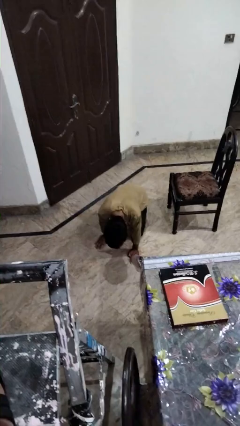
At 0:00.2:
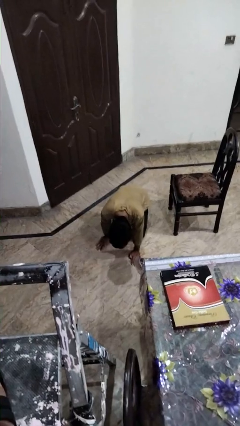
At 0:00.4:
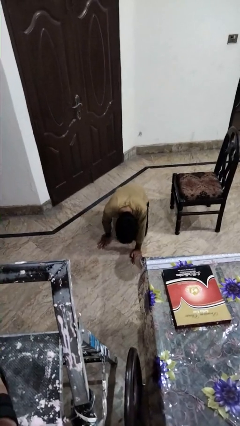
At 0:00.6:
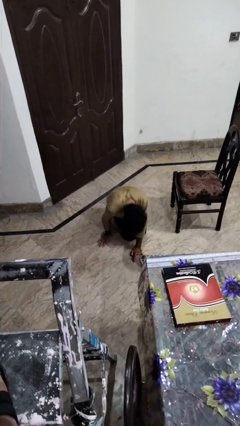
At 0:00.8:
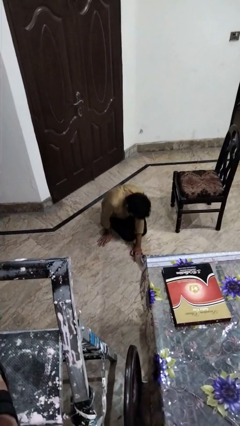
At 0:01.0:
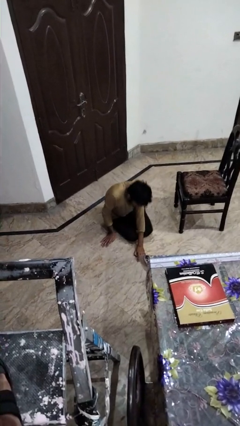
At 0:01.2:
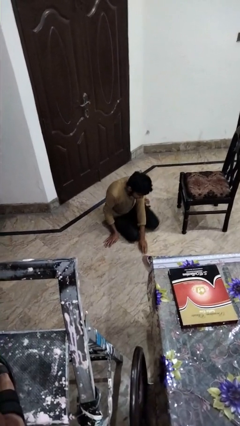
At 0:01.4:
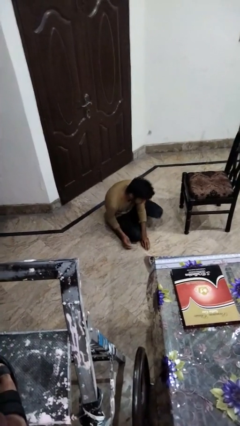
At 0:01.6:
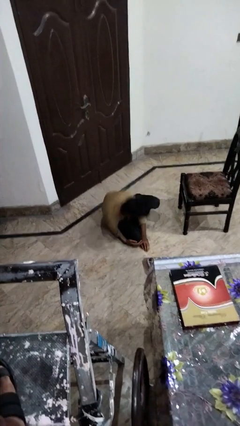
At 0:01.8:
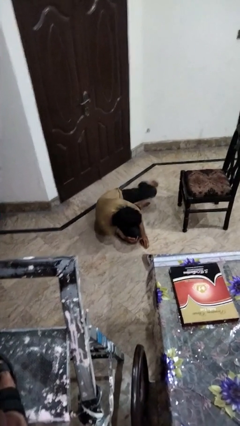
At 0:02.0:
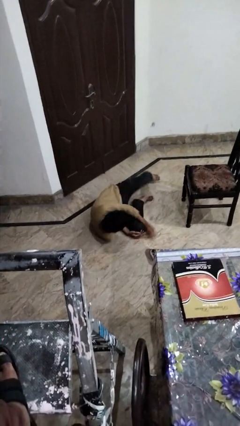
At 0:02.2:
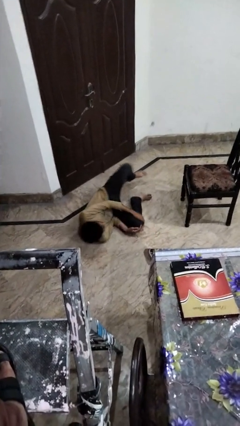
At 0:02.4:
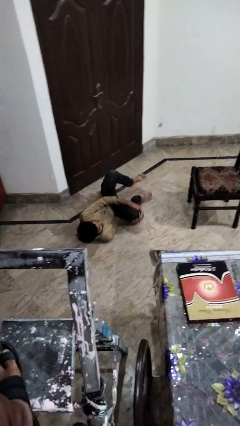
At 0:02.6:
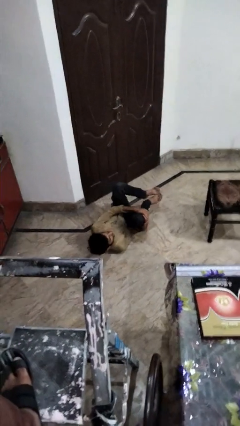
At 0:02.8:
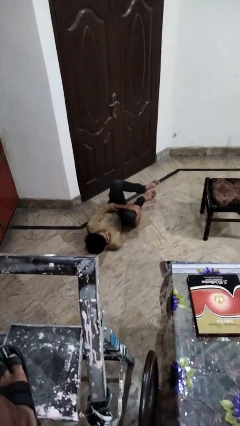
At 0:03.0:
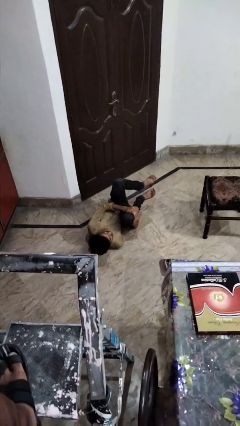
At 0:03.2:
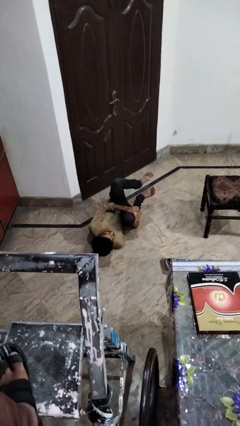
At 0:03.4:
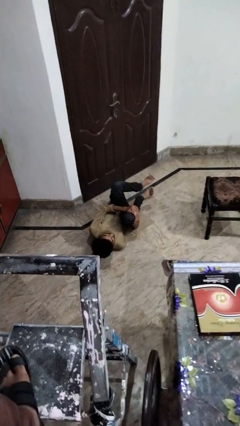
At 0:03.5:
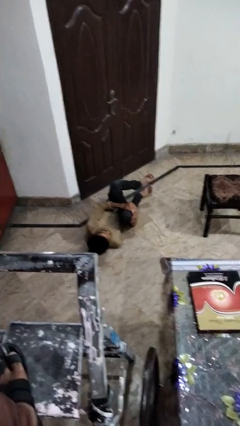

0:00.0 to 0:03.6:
person lies down on floor

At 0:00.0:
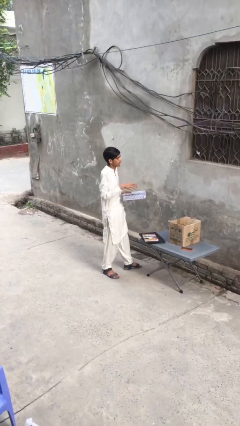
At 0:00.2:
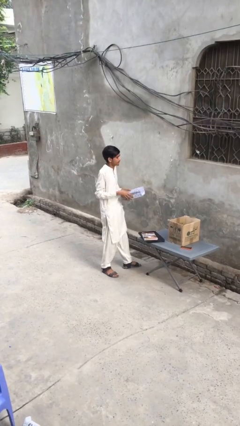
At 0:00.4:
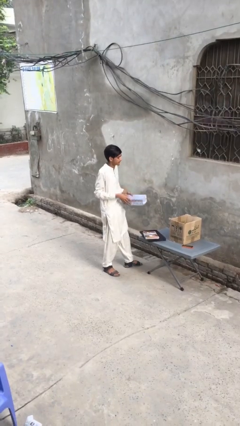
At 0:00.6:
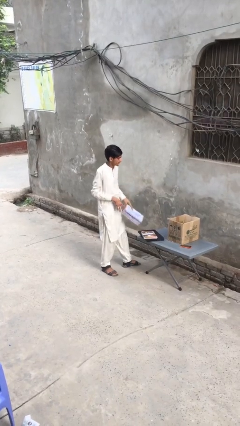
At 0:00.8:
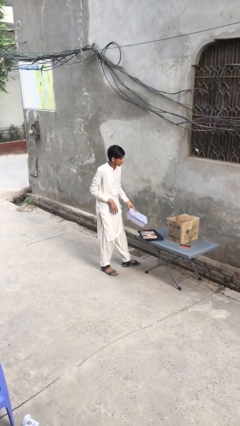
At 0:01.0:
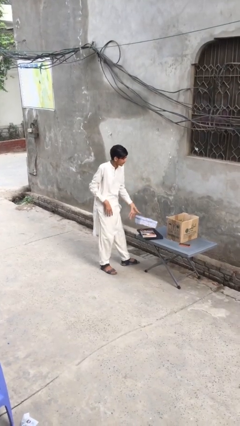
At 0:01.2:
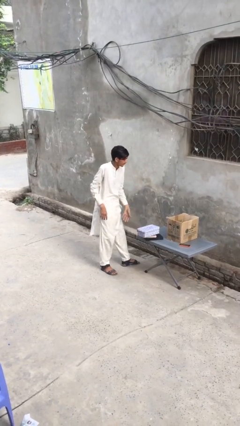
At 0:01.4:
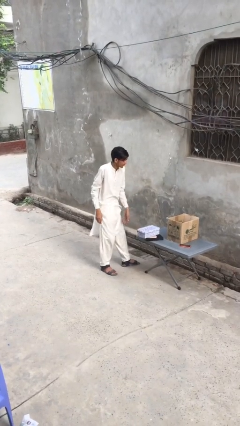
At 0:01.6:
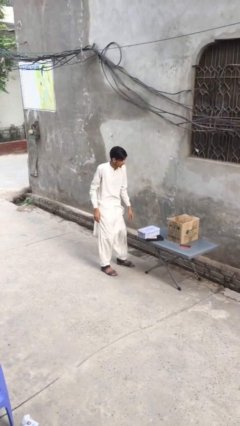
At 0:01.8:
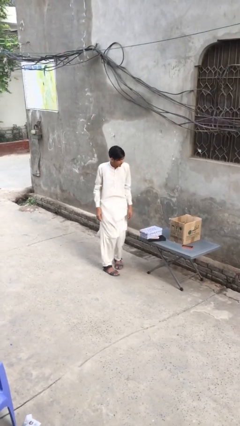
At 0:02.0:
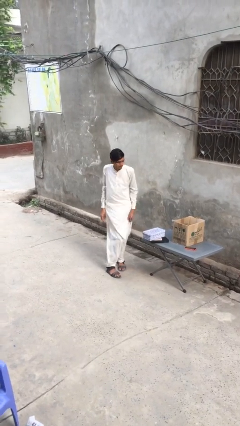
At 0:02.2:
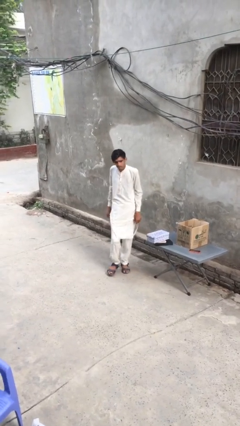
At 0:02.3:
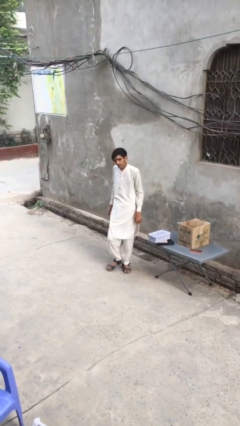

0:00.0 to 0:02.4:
person puts down object on table

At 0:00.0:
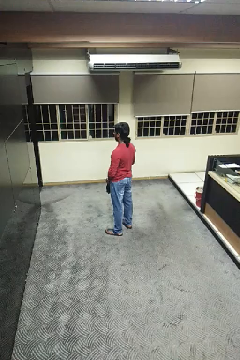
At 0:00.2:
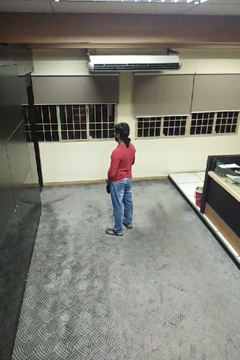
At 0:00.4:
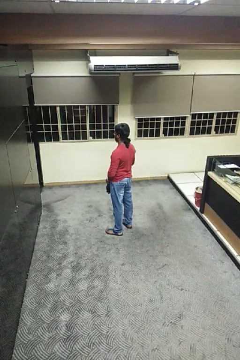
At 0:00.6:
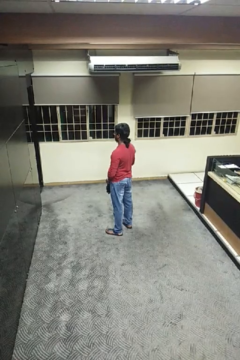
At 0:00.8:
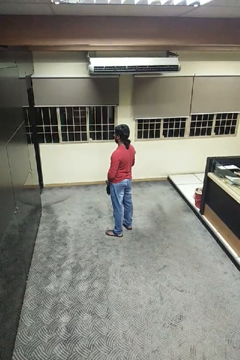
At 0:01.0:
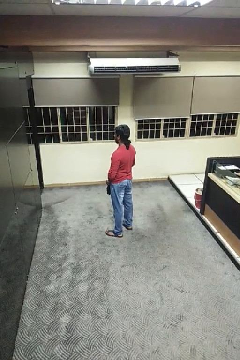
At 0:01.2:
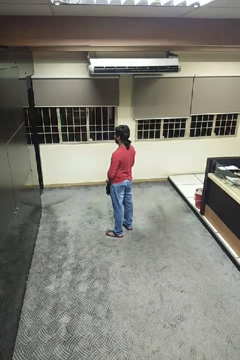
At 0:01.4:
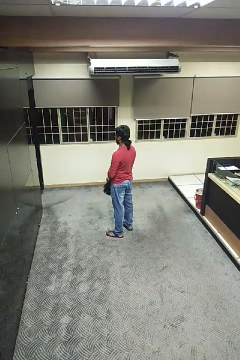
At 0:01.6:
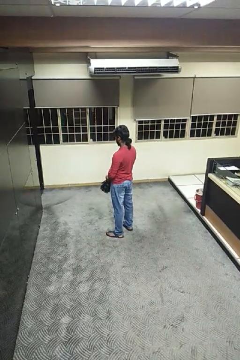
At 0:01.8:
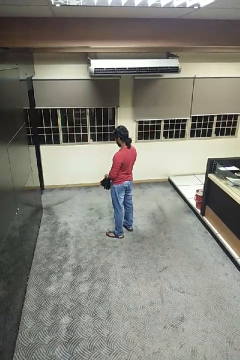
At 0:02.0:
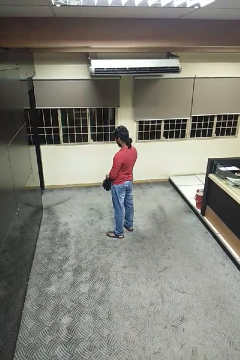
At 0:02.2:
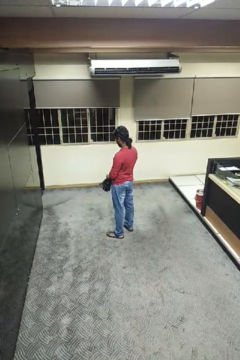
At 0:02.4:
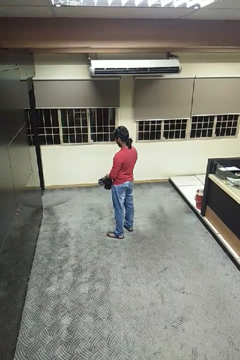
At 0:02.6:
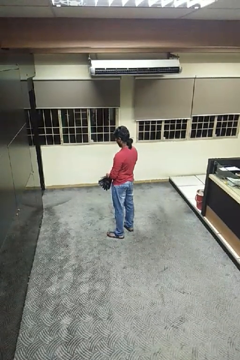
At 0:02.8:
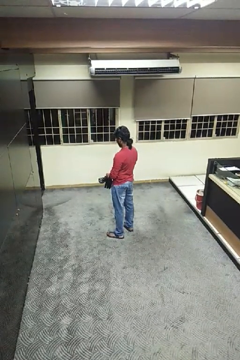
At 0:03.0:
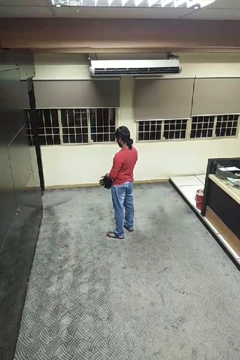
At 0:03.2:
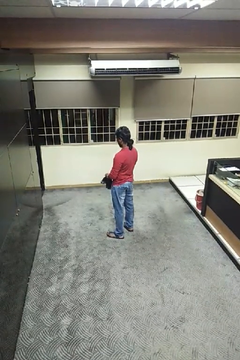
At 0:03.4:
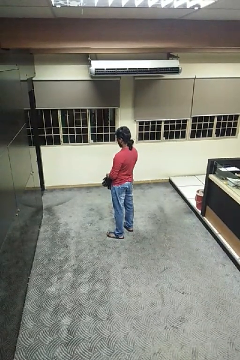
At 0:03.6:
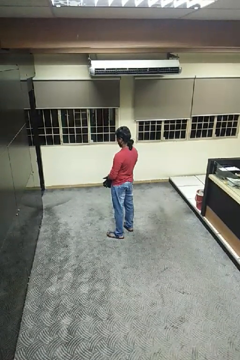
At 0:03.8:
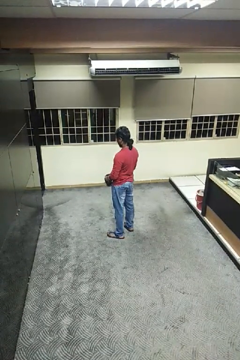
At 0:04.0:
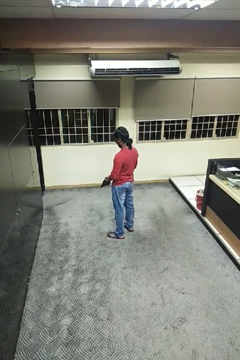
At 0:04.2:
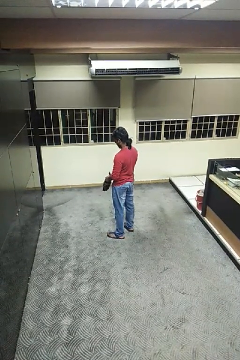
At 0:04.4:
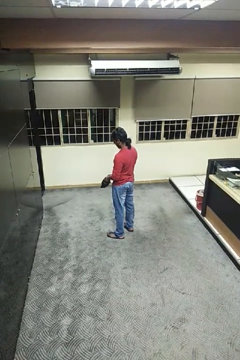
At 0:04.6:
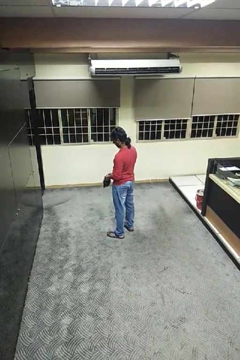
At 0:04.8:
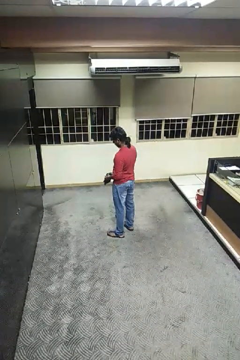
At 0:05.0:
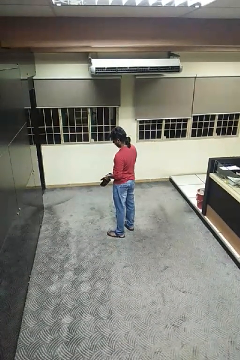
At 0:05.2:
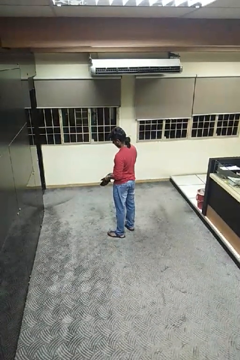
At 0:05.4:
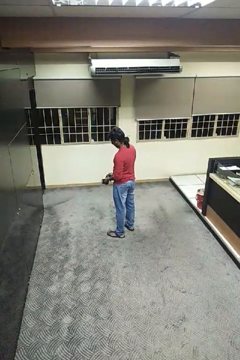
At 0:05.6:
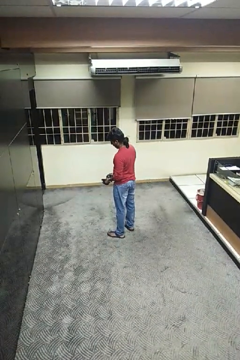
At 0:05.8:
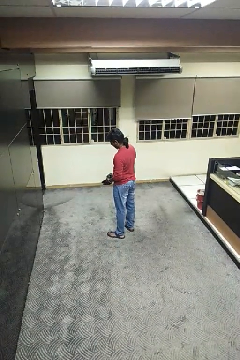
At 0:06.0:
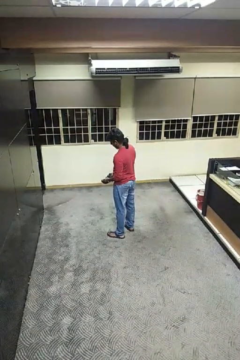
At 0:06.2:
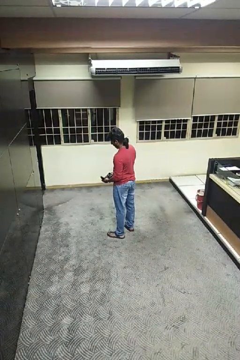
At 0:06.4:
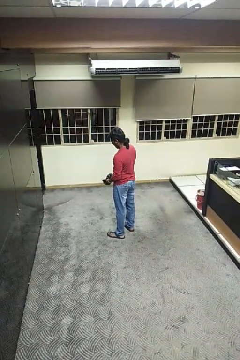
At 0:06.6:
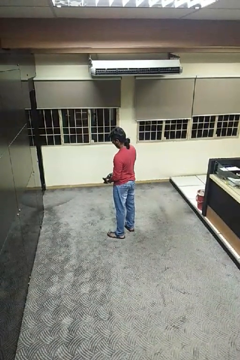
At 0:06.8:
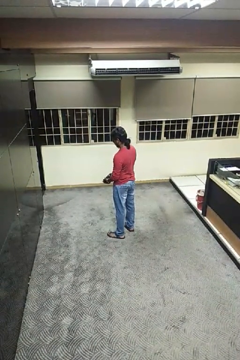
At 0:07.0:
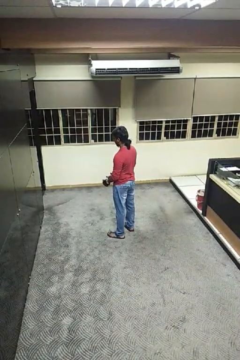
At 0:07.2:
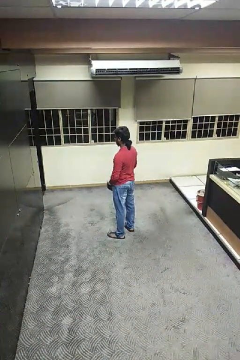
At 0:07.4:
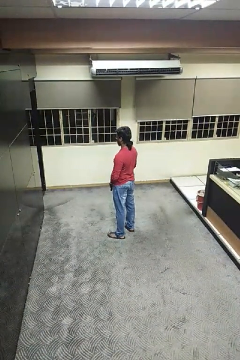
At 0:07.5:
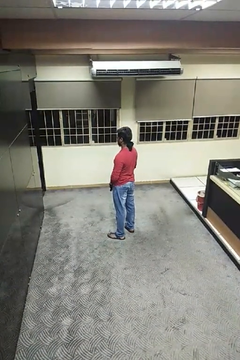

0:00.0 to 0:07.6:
person puts on gloves

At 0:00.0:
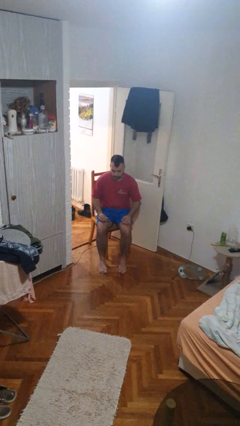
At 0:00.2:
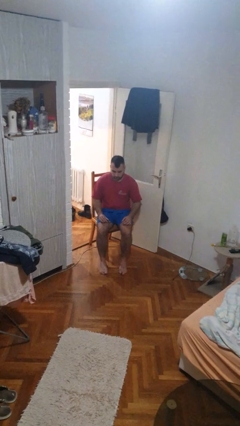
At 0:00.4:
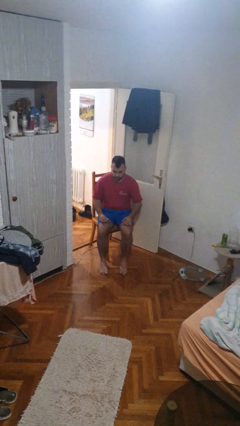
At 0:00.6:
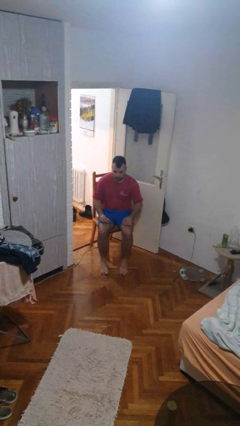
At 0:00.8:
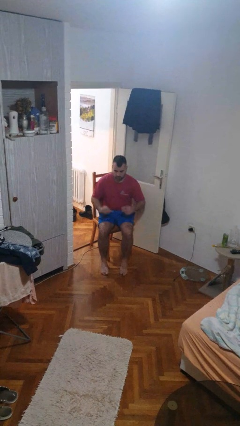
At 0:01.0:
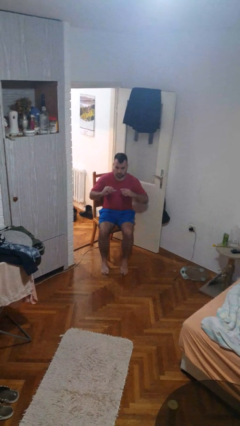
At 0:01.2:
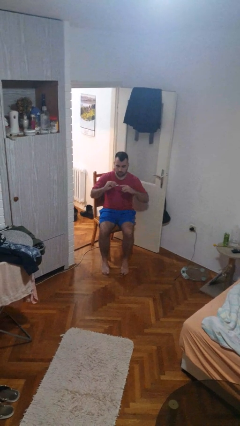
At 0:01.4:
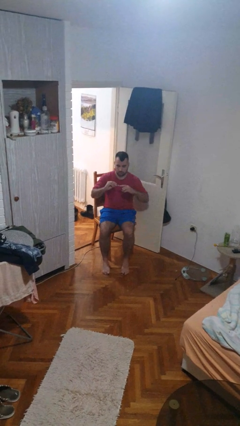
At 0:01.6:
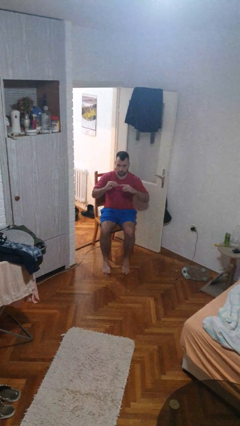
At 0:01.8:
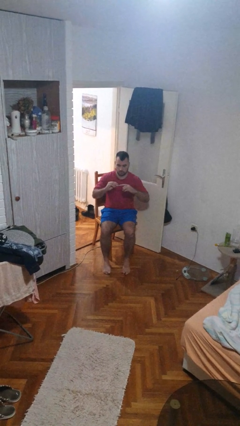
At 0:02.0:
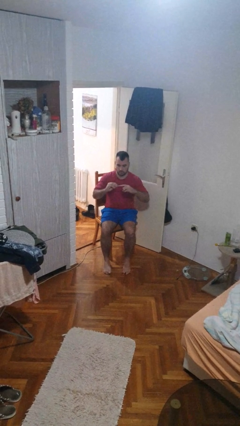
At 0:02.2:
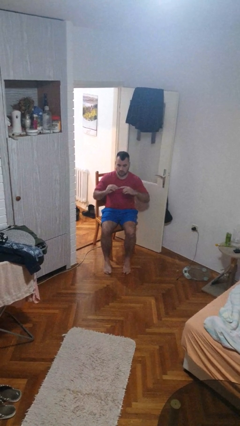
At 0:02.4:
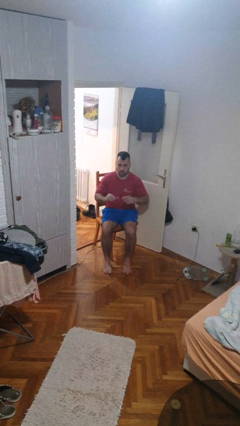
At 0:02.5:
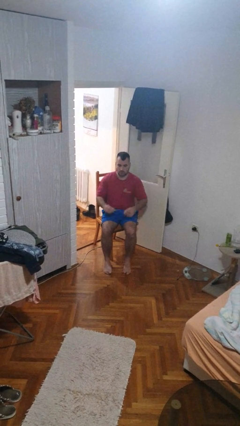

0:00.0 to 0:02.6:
person clips fingernails

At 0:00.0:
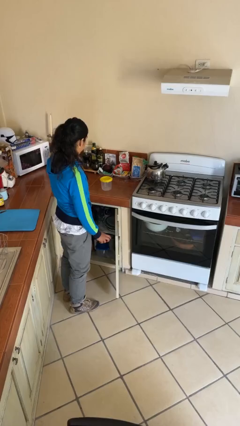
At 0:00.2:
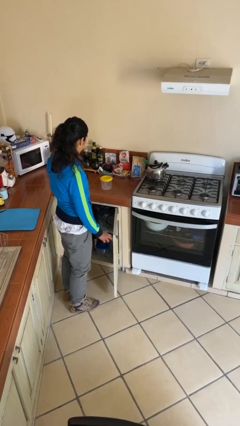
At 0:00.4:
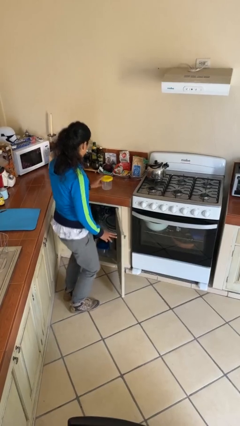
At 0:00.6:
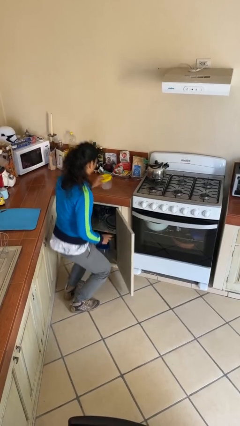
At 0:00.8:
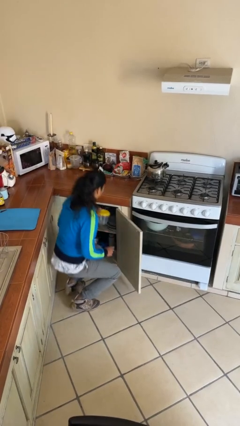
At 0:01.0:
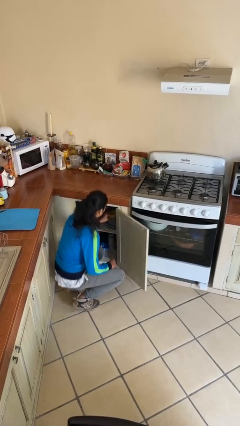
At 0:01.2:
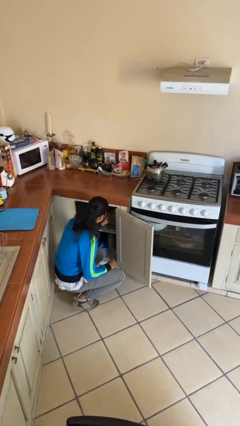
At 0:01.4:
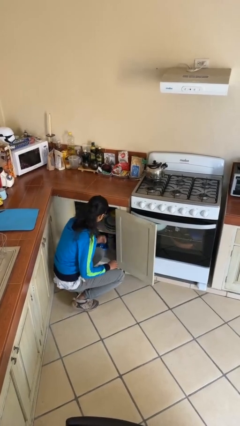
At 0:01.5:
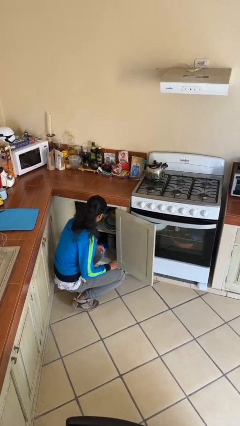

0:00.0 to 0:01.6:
person puts object in cabinet

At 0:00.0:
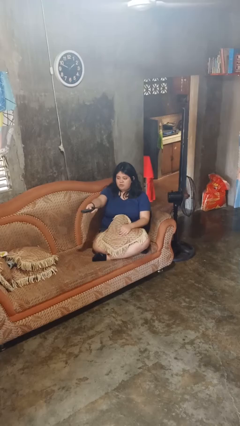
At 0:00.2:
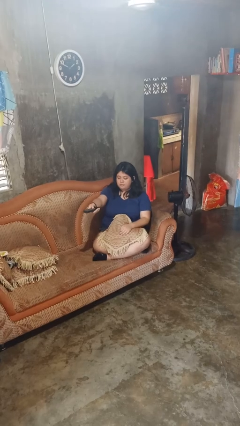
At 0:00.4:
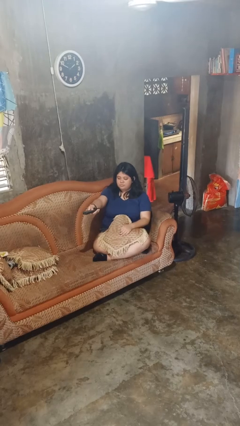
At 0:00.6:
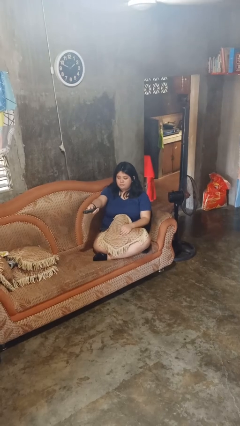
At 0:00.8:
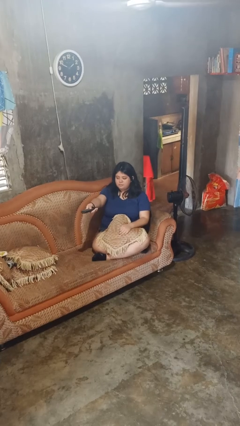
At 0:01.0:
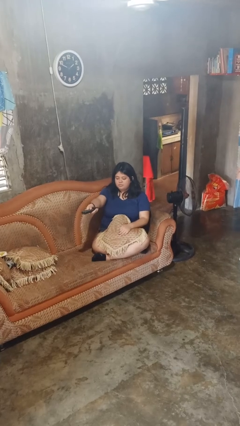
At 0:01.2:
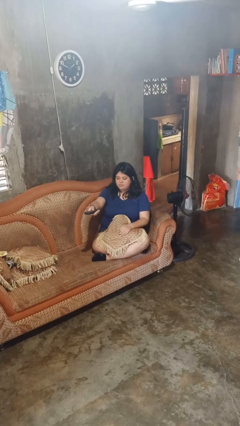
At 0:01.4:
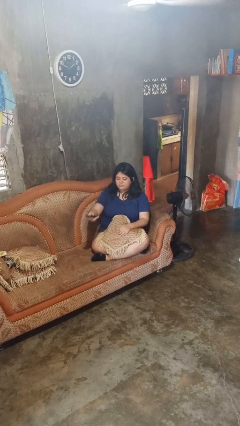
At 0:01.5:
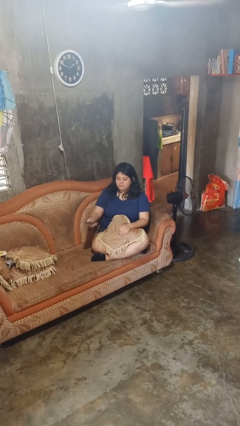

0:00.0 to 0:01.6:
person uses television remote
